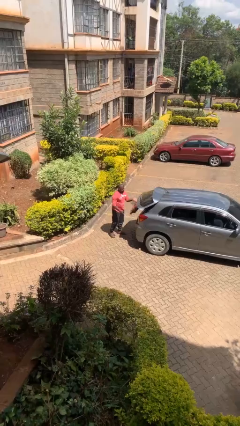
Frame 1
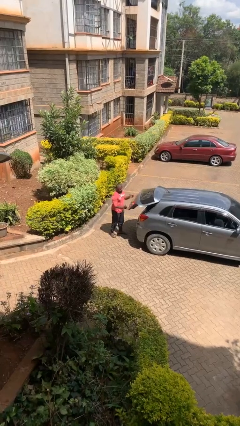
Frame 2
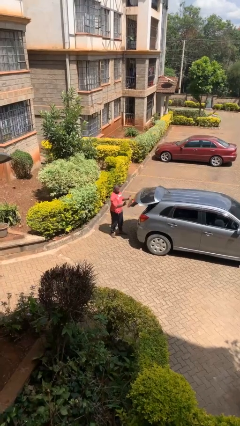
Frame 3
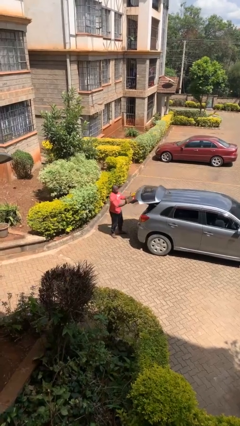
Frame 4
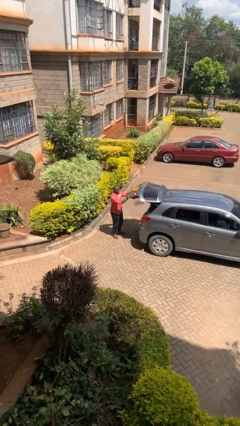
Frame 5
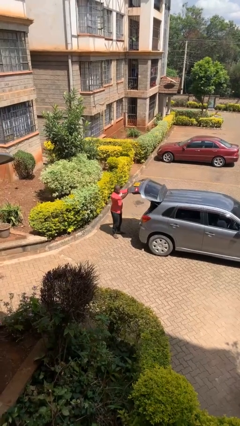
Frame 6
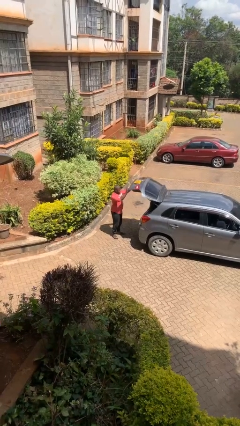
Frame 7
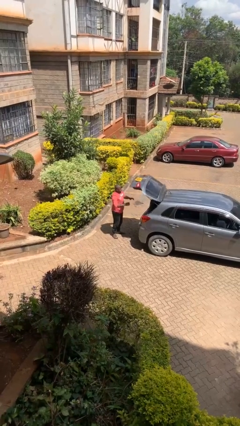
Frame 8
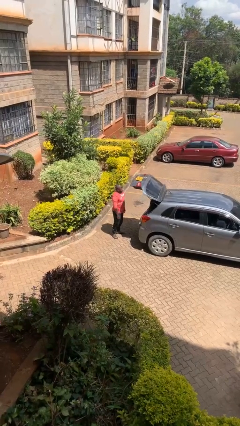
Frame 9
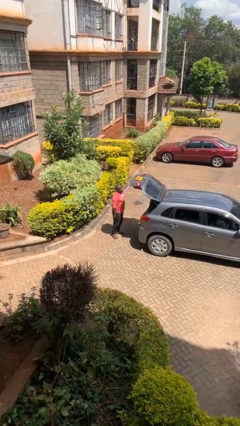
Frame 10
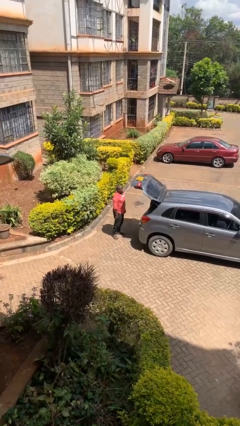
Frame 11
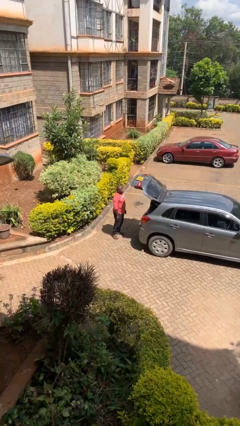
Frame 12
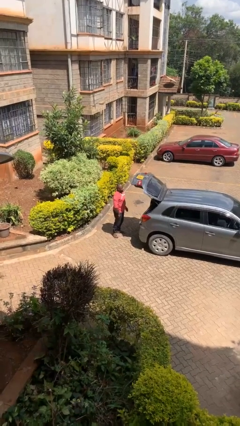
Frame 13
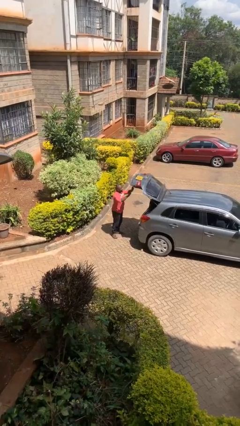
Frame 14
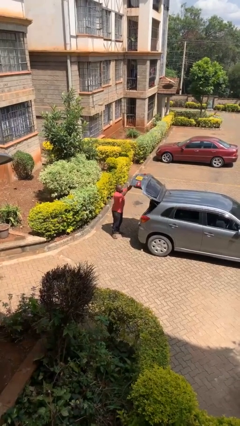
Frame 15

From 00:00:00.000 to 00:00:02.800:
person opens car trunk

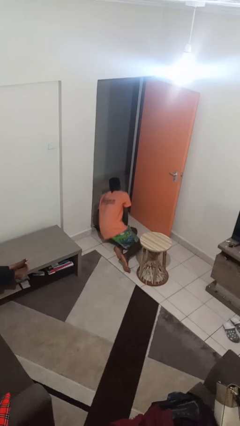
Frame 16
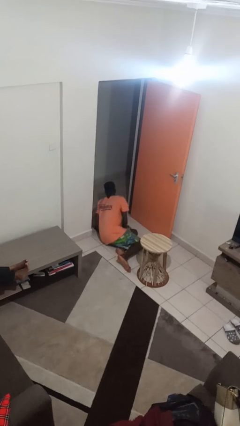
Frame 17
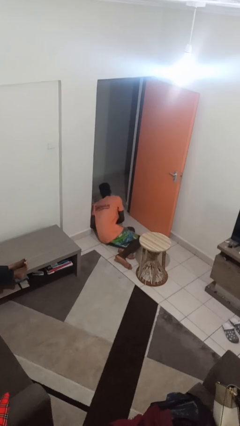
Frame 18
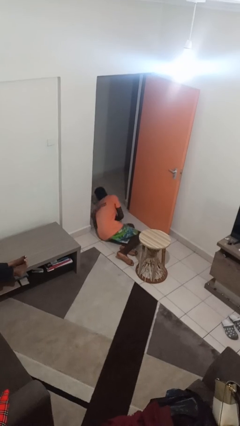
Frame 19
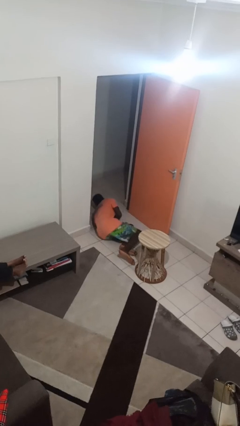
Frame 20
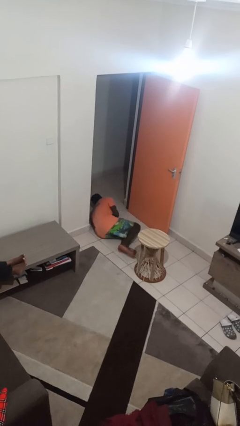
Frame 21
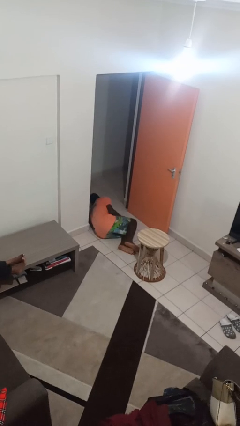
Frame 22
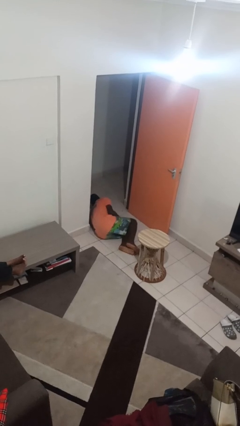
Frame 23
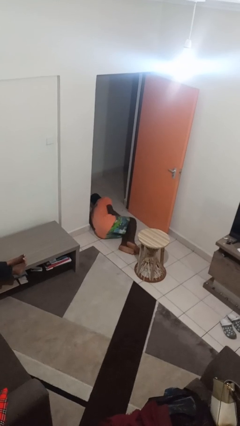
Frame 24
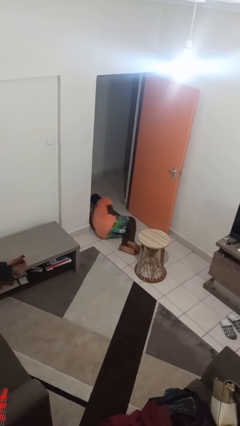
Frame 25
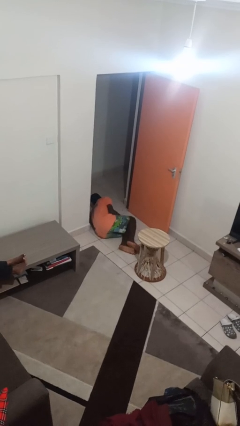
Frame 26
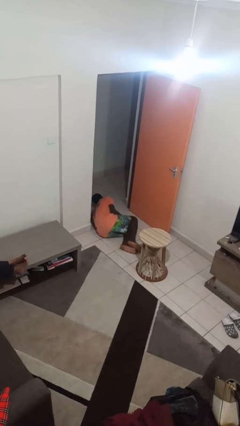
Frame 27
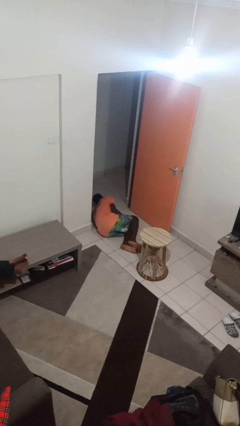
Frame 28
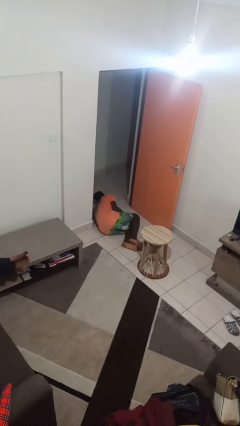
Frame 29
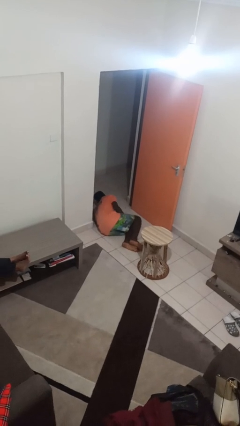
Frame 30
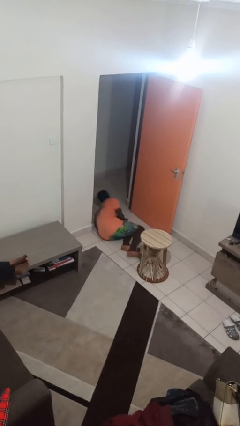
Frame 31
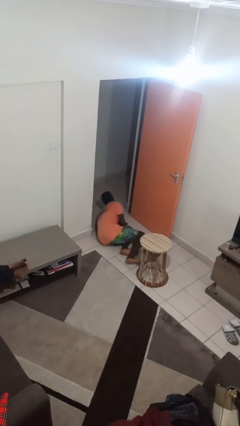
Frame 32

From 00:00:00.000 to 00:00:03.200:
person lies down on floor

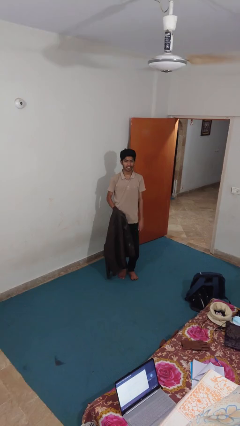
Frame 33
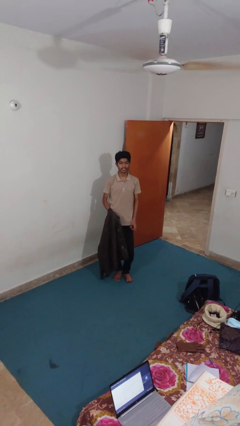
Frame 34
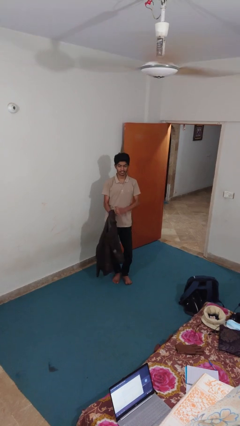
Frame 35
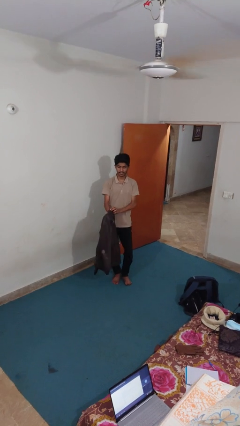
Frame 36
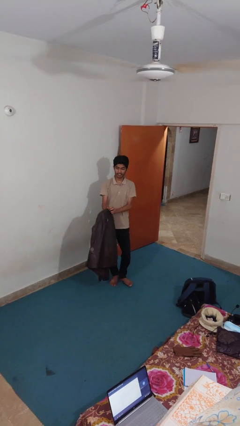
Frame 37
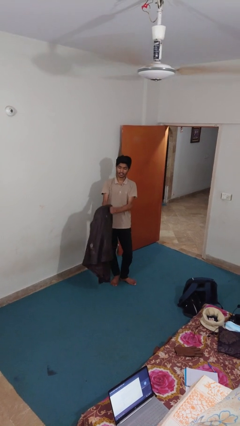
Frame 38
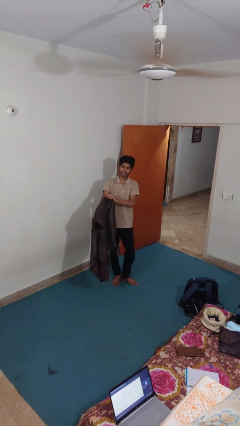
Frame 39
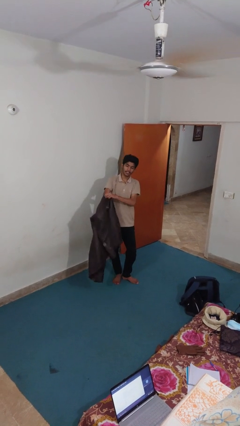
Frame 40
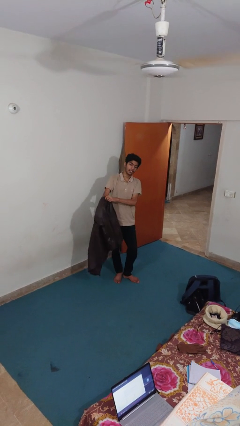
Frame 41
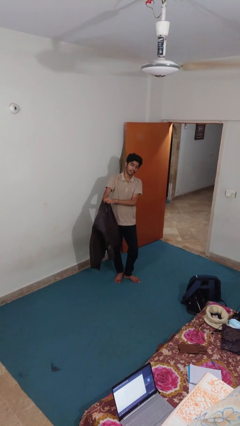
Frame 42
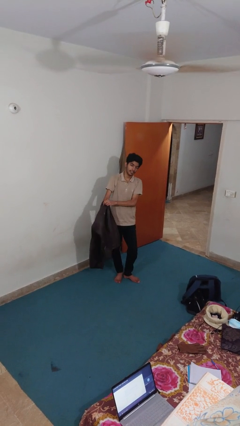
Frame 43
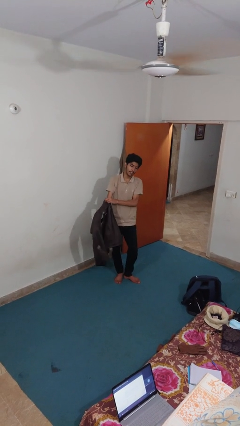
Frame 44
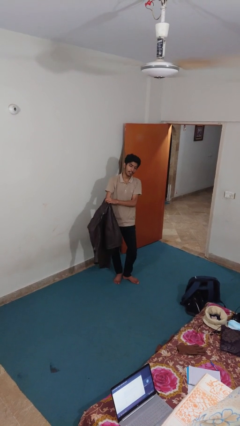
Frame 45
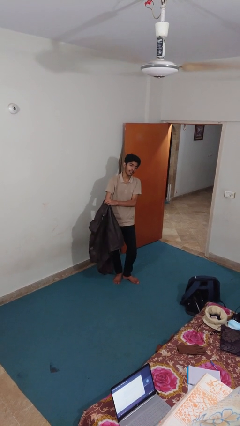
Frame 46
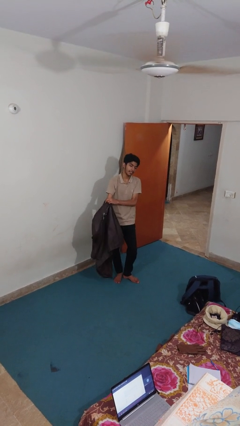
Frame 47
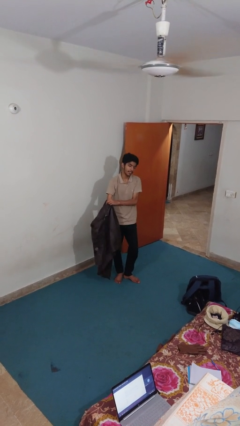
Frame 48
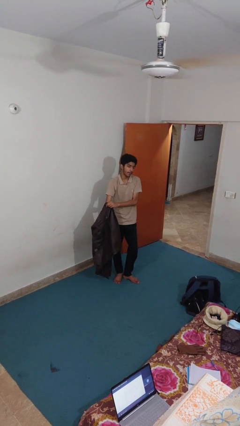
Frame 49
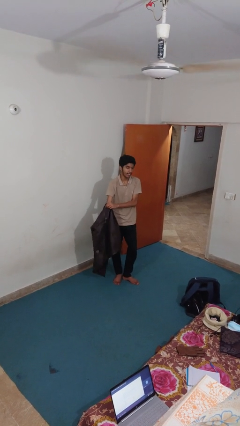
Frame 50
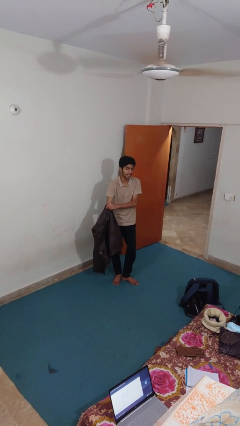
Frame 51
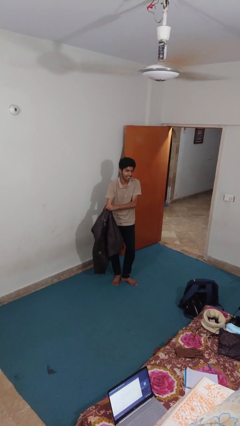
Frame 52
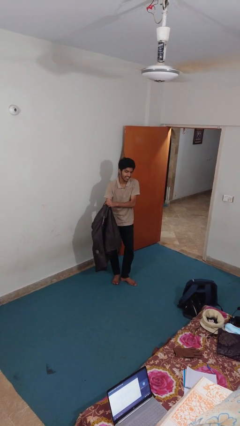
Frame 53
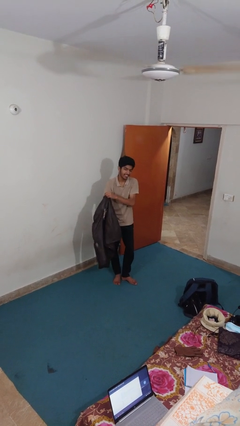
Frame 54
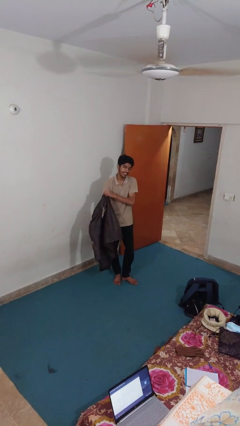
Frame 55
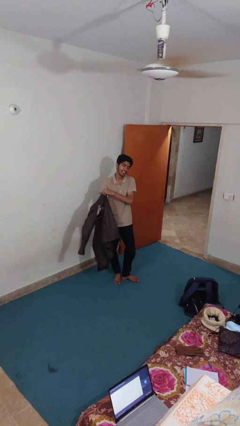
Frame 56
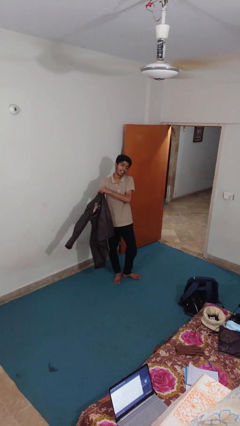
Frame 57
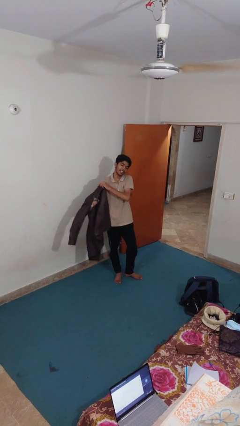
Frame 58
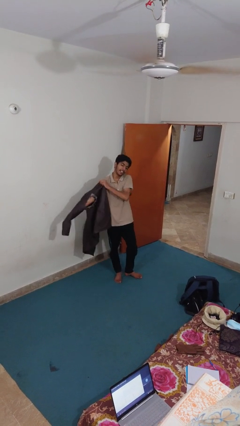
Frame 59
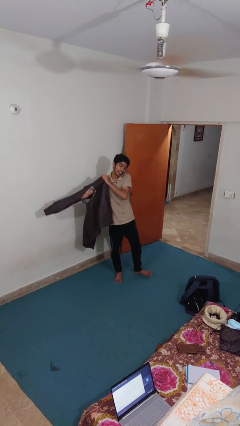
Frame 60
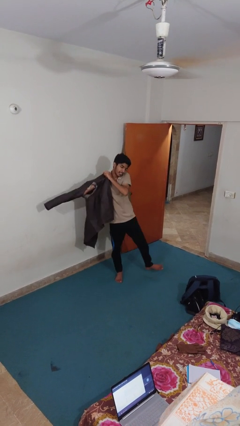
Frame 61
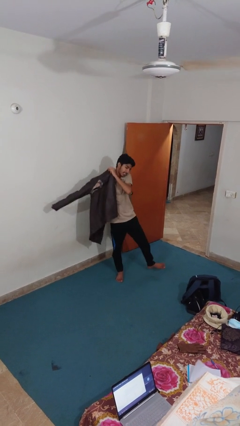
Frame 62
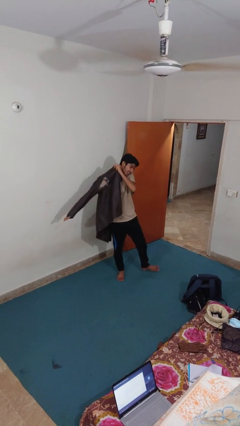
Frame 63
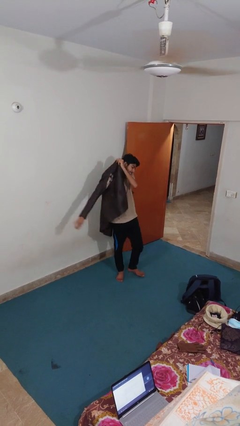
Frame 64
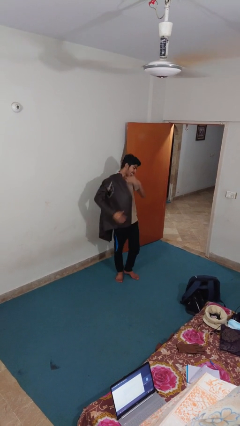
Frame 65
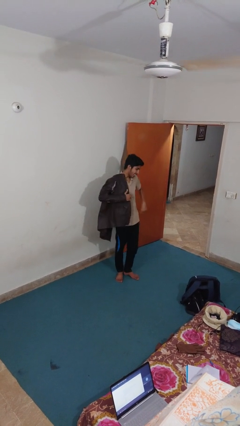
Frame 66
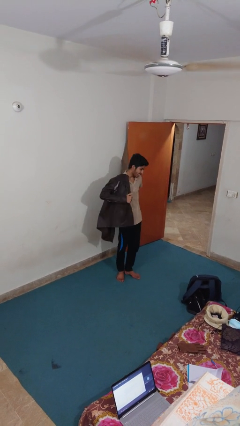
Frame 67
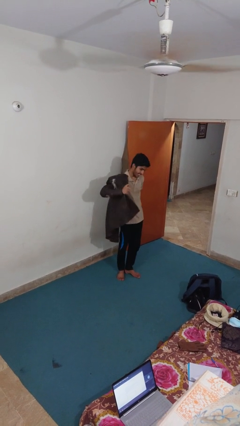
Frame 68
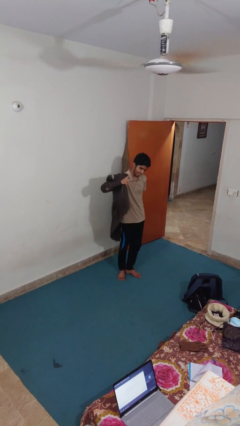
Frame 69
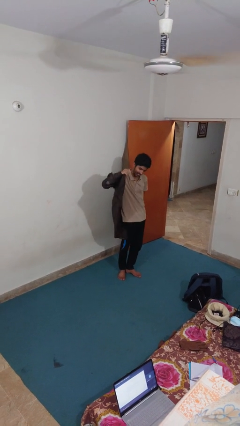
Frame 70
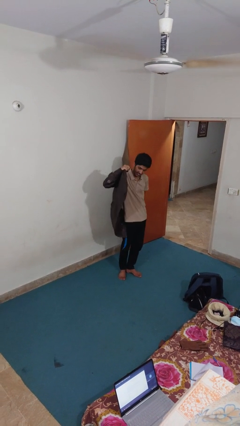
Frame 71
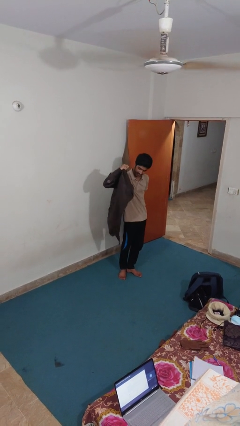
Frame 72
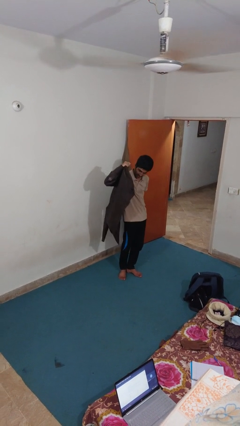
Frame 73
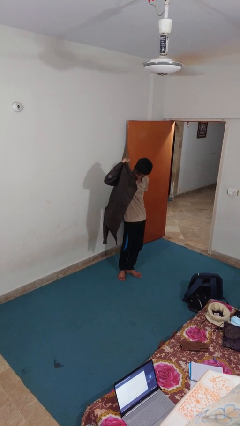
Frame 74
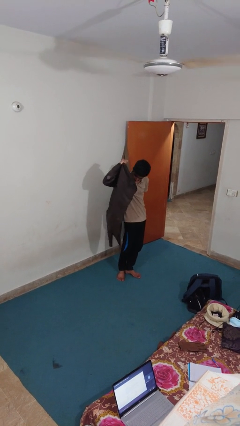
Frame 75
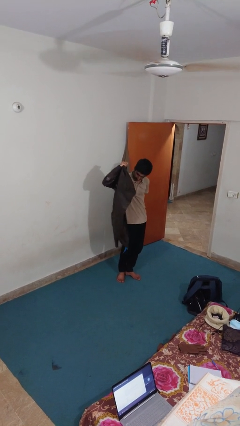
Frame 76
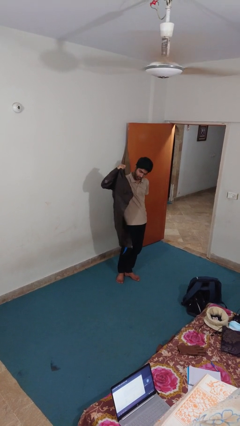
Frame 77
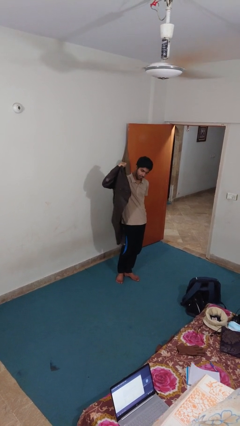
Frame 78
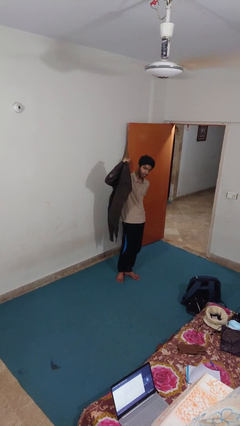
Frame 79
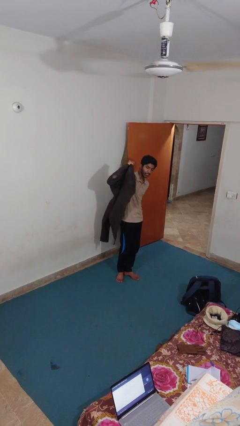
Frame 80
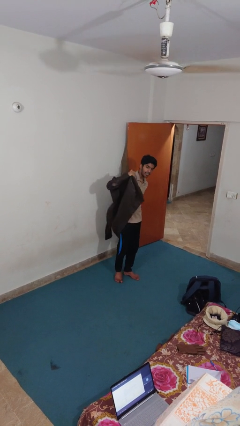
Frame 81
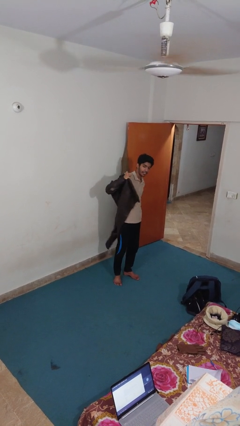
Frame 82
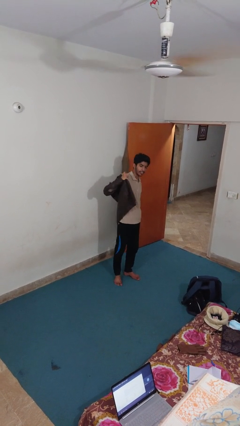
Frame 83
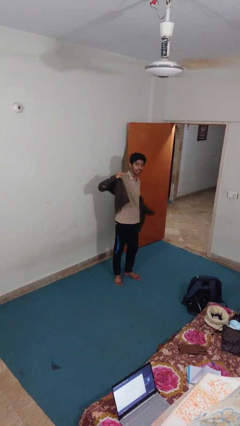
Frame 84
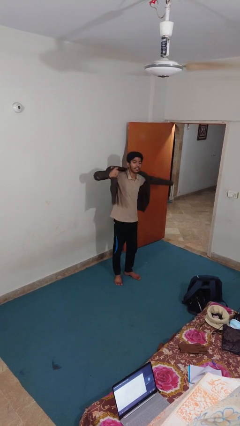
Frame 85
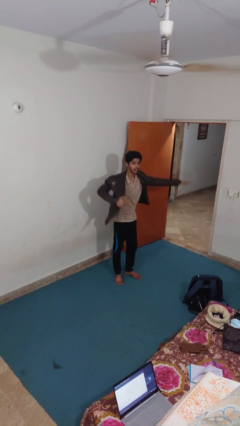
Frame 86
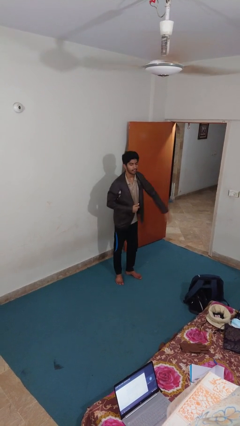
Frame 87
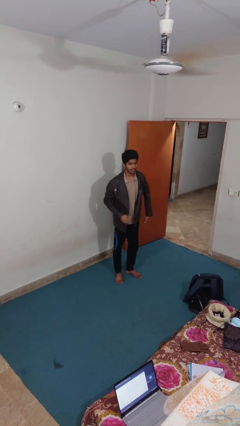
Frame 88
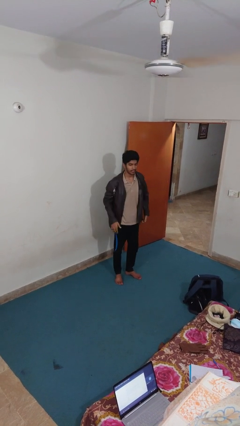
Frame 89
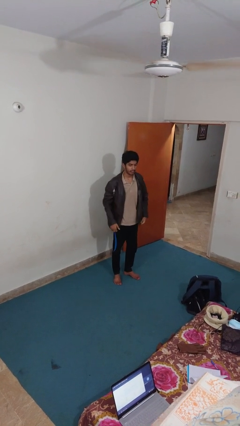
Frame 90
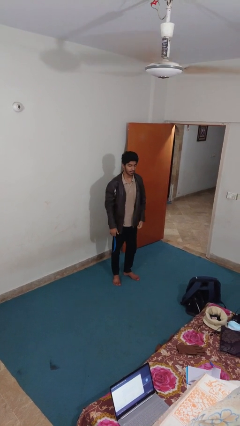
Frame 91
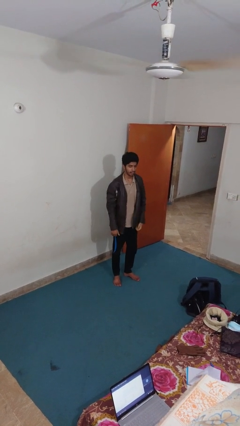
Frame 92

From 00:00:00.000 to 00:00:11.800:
person puts on jacket

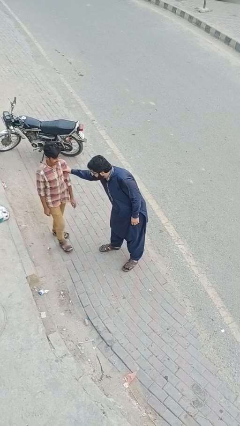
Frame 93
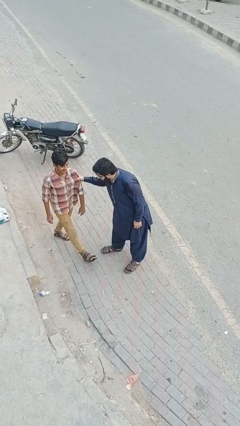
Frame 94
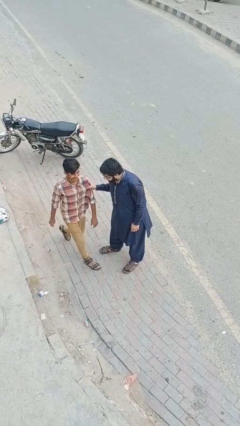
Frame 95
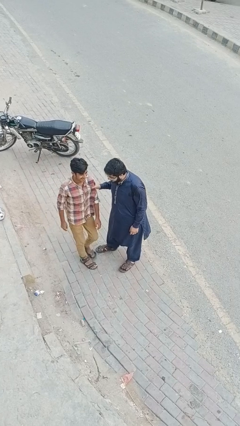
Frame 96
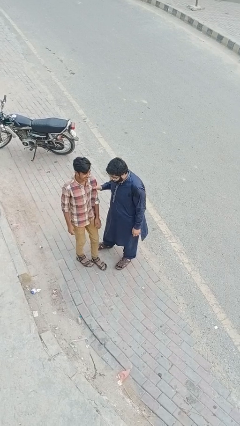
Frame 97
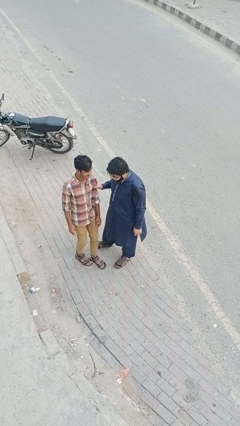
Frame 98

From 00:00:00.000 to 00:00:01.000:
person grabs person by bicep
